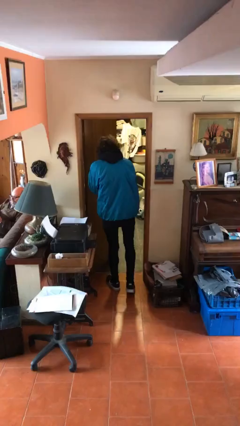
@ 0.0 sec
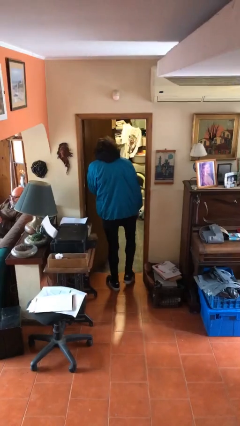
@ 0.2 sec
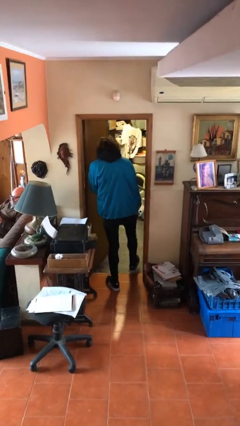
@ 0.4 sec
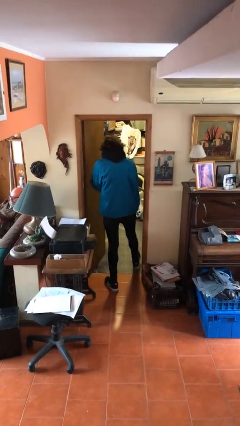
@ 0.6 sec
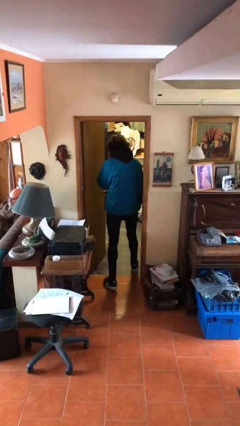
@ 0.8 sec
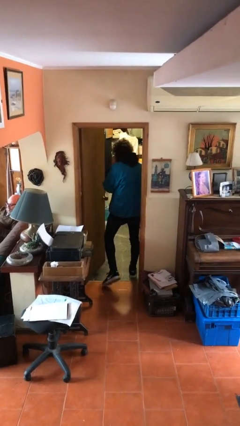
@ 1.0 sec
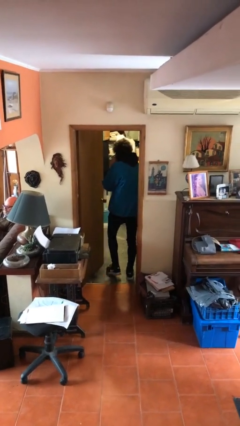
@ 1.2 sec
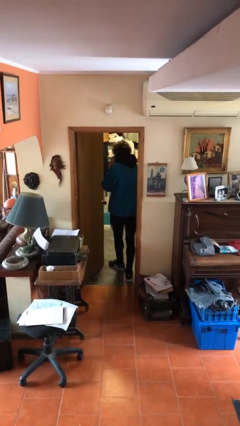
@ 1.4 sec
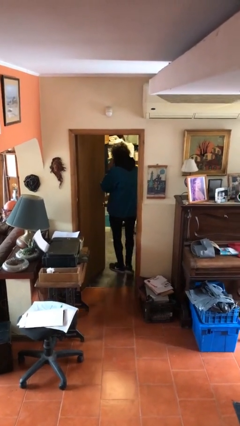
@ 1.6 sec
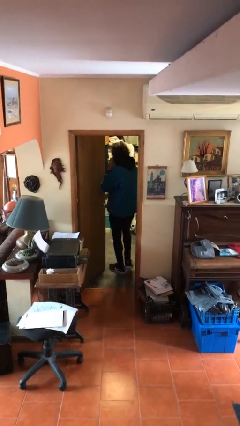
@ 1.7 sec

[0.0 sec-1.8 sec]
person exits scene through structure

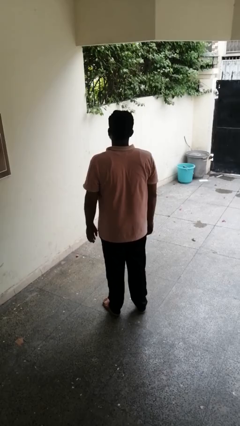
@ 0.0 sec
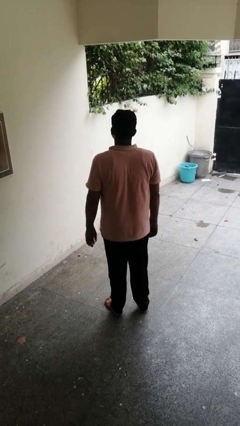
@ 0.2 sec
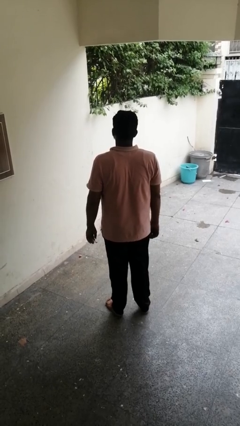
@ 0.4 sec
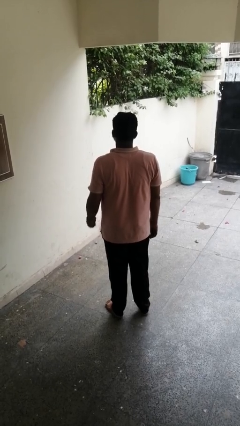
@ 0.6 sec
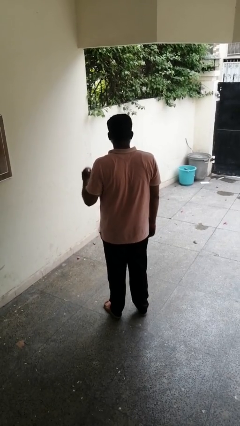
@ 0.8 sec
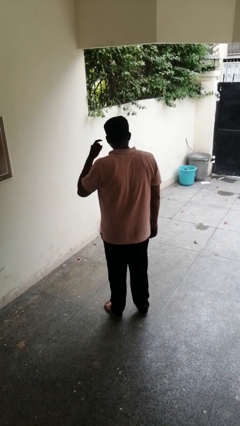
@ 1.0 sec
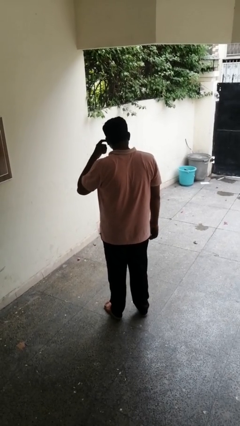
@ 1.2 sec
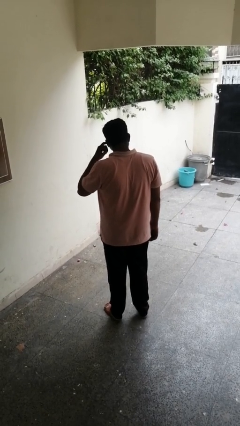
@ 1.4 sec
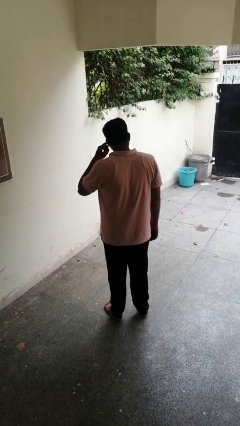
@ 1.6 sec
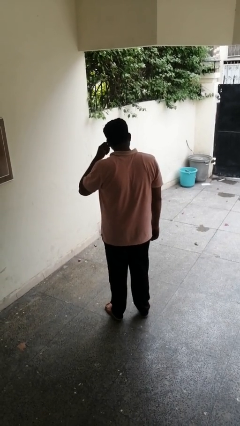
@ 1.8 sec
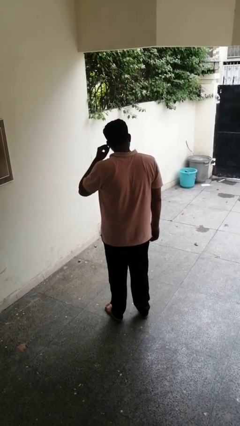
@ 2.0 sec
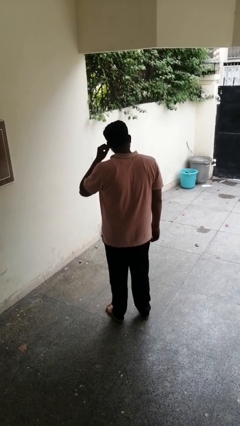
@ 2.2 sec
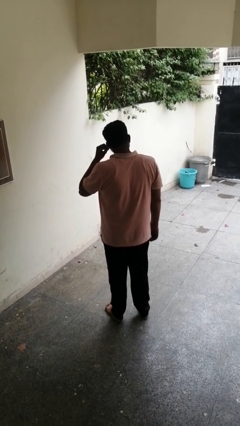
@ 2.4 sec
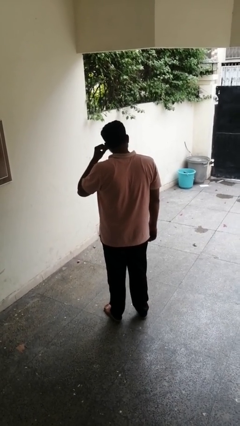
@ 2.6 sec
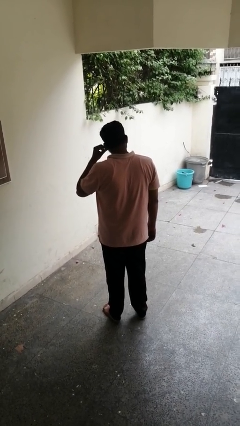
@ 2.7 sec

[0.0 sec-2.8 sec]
person touches earlobe

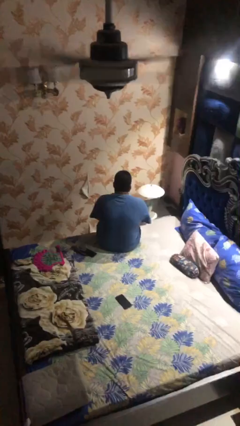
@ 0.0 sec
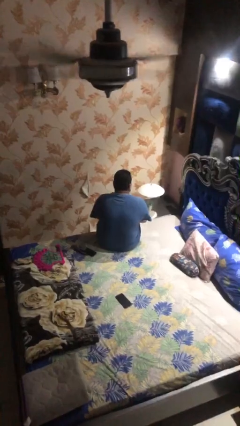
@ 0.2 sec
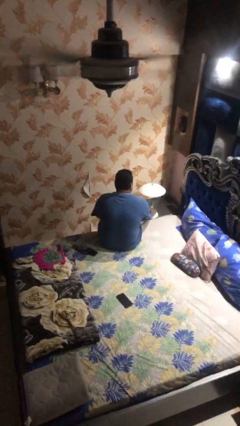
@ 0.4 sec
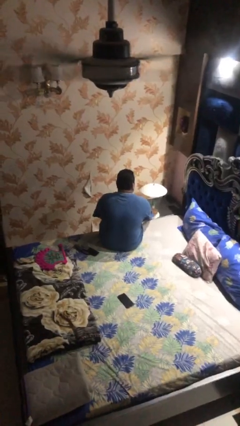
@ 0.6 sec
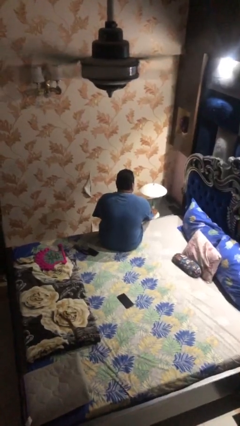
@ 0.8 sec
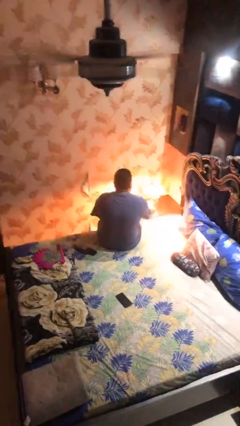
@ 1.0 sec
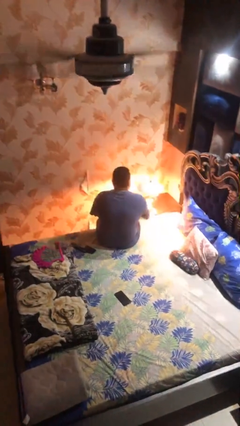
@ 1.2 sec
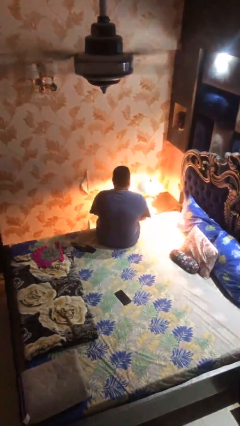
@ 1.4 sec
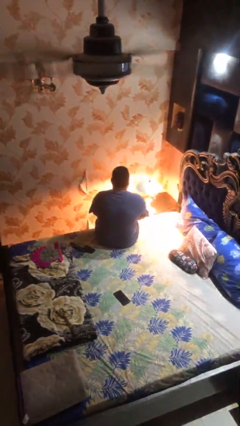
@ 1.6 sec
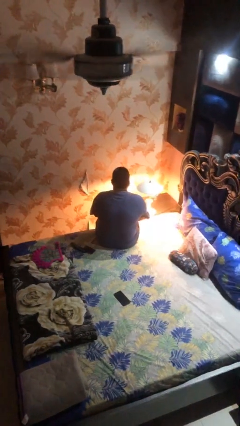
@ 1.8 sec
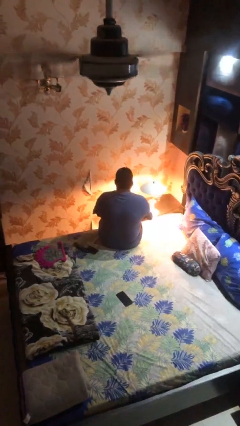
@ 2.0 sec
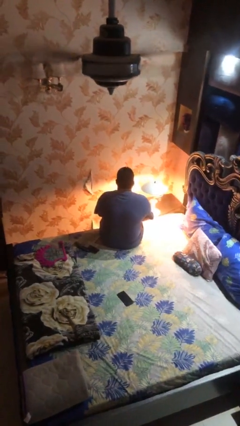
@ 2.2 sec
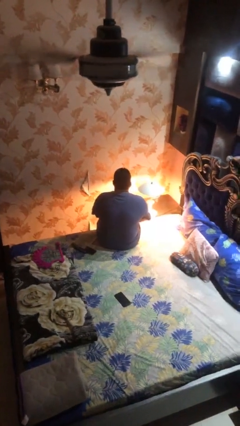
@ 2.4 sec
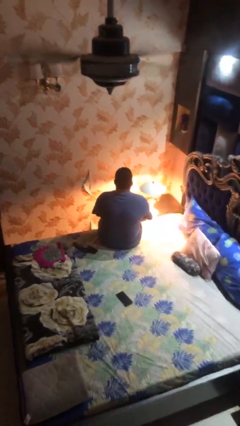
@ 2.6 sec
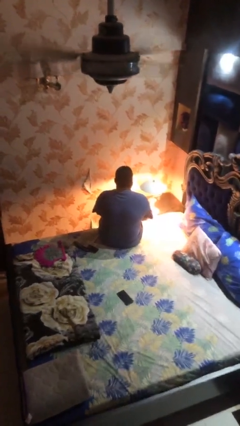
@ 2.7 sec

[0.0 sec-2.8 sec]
person turns on lamp

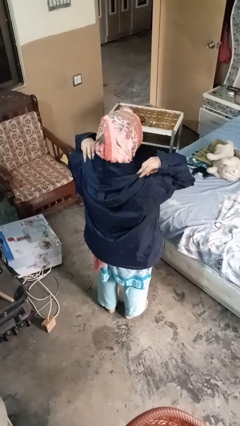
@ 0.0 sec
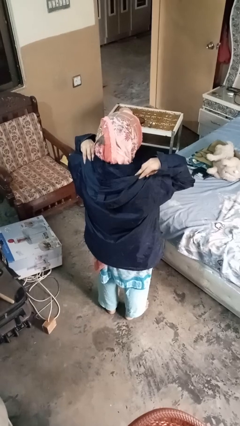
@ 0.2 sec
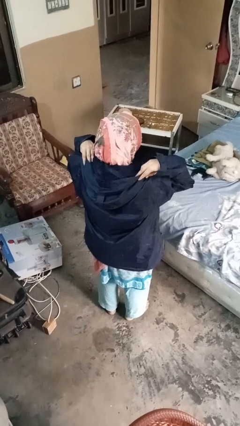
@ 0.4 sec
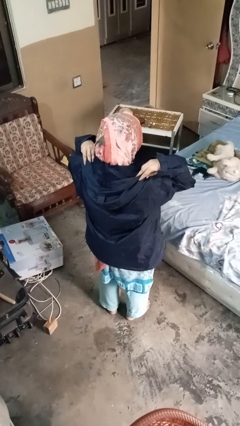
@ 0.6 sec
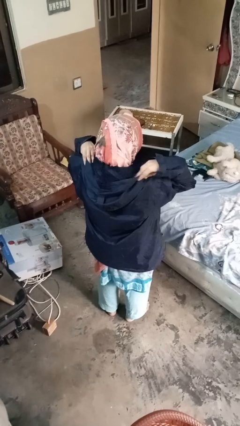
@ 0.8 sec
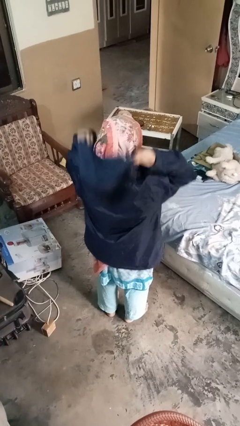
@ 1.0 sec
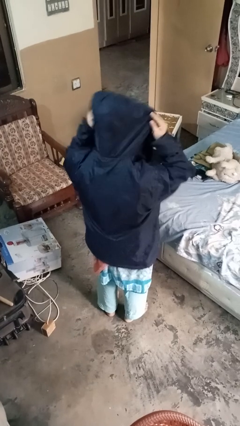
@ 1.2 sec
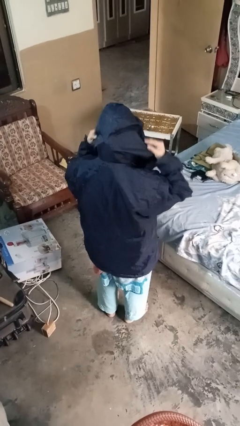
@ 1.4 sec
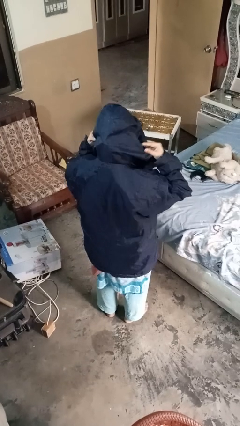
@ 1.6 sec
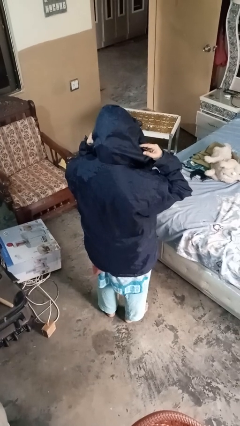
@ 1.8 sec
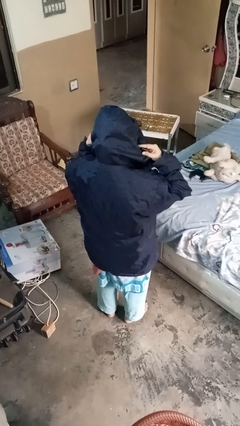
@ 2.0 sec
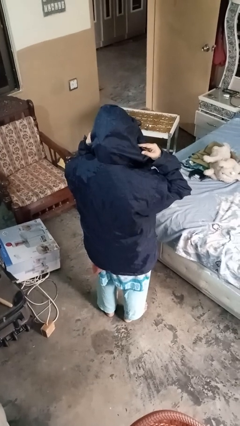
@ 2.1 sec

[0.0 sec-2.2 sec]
person puts on hoodie

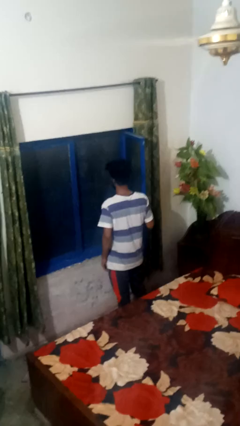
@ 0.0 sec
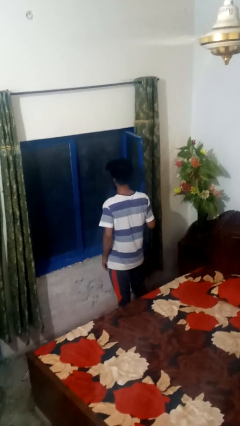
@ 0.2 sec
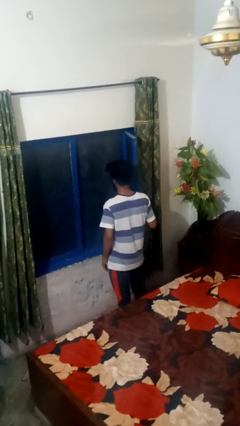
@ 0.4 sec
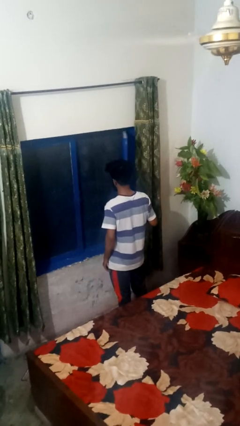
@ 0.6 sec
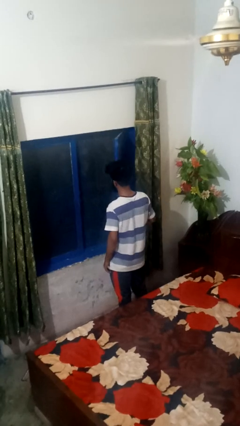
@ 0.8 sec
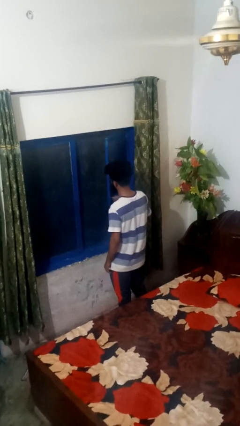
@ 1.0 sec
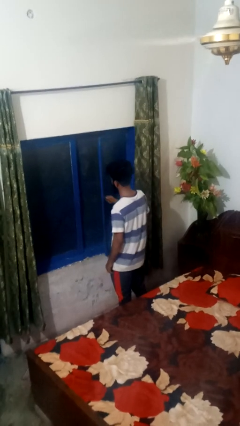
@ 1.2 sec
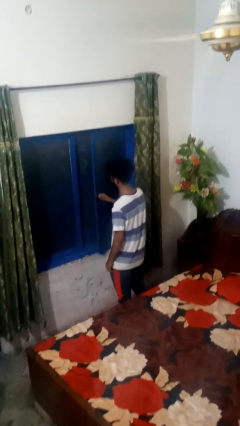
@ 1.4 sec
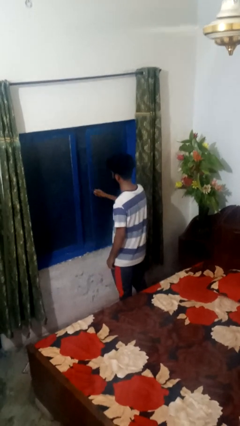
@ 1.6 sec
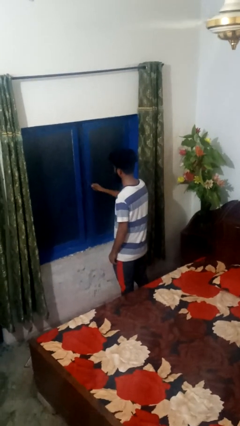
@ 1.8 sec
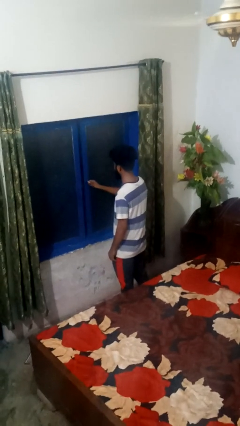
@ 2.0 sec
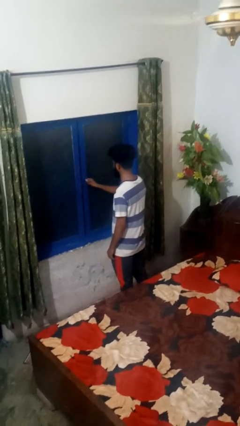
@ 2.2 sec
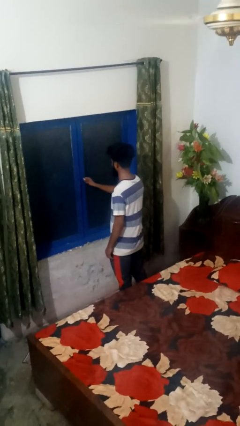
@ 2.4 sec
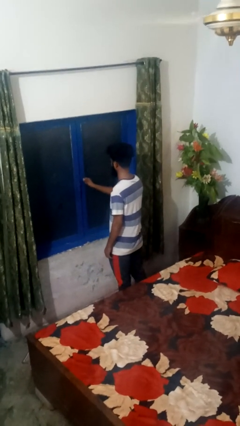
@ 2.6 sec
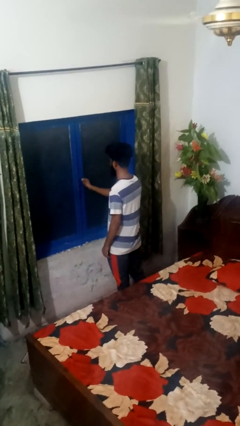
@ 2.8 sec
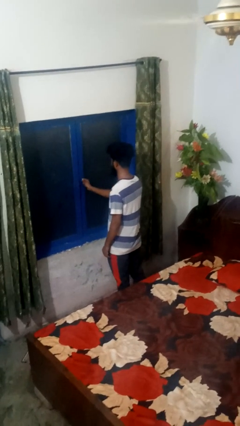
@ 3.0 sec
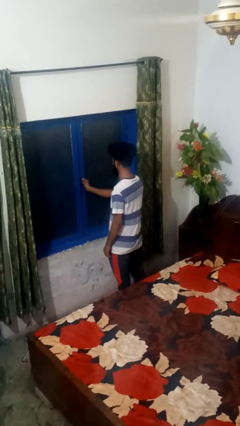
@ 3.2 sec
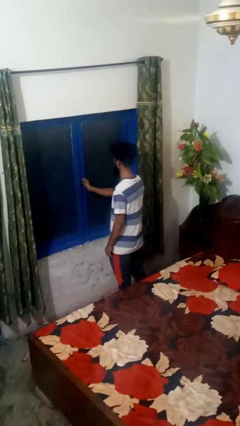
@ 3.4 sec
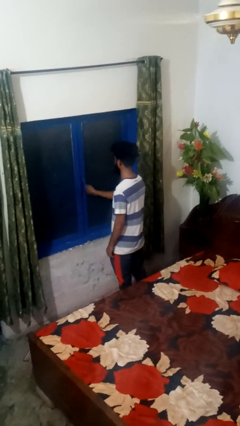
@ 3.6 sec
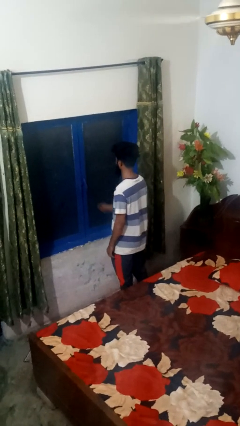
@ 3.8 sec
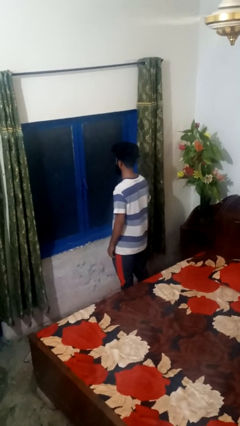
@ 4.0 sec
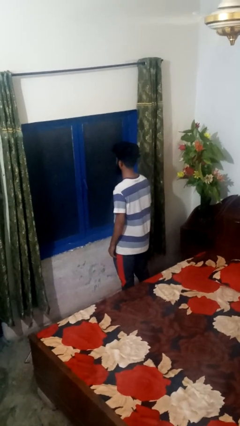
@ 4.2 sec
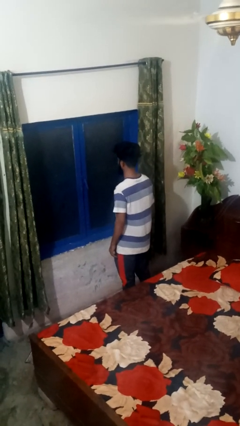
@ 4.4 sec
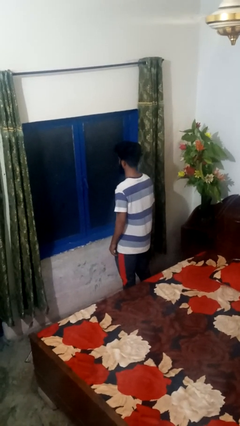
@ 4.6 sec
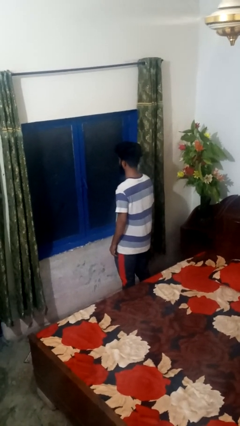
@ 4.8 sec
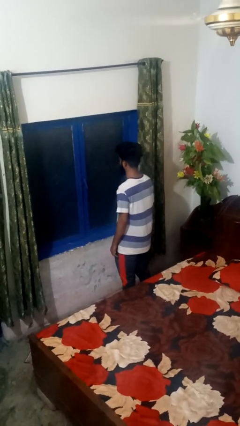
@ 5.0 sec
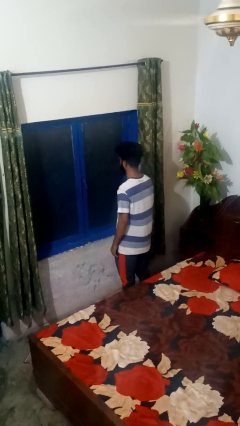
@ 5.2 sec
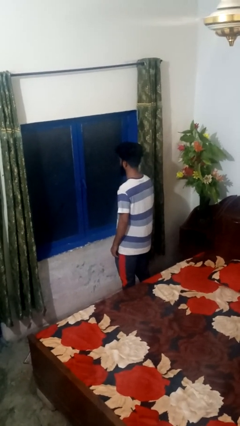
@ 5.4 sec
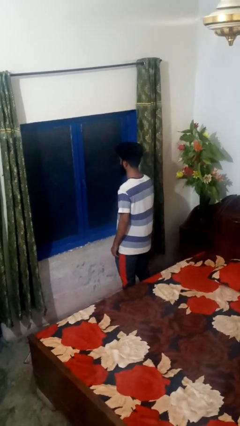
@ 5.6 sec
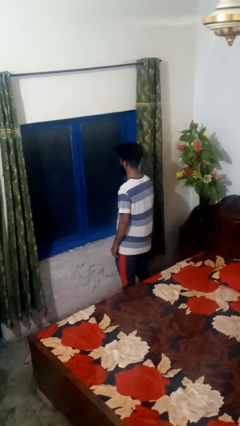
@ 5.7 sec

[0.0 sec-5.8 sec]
person closes home window

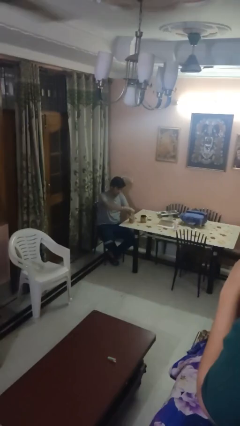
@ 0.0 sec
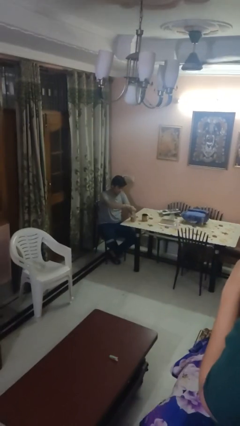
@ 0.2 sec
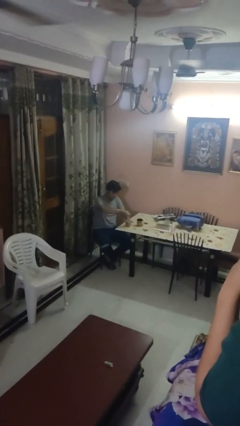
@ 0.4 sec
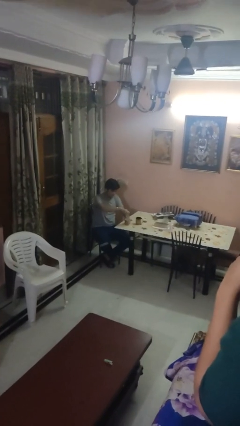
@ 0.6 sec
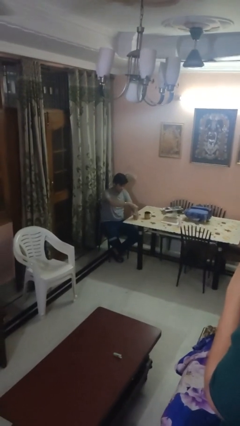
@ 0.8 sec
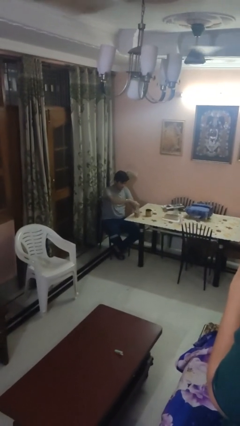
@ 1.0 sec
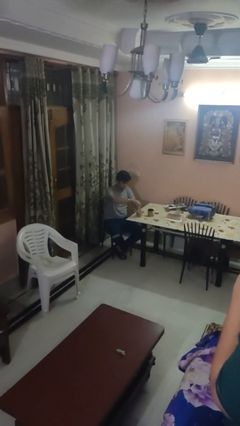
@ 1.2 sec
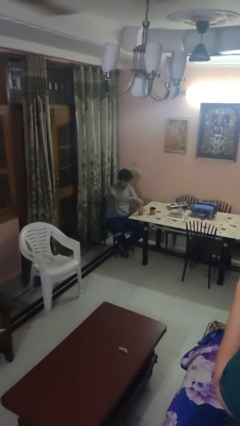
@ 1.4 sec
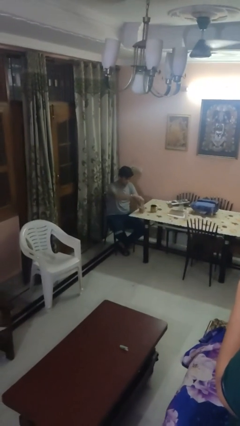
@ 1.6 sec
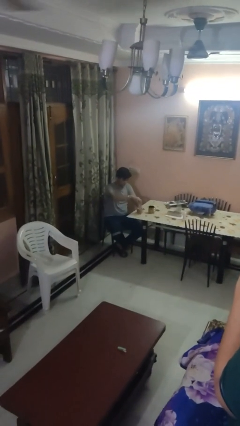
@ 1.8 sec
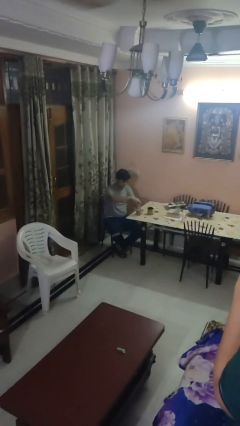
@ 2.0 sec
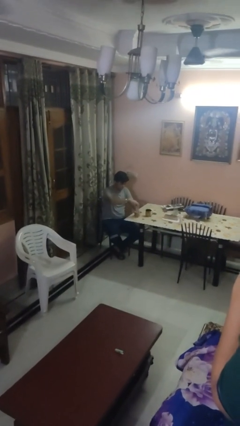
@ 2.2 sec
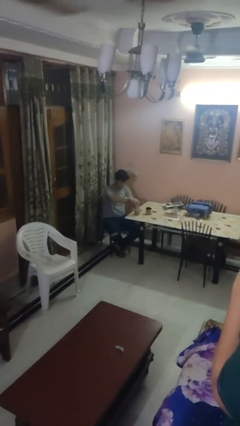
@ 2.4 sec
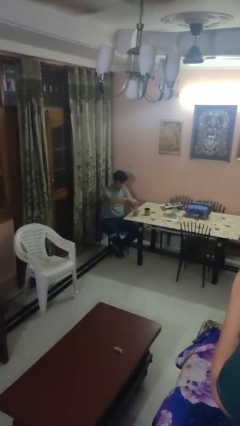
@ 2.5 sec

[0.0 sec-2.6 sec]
person unscrews lid from bottle
